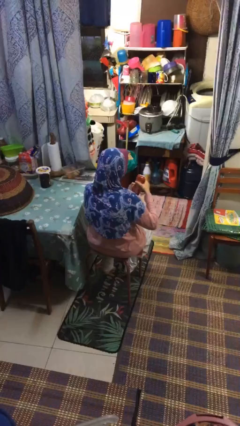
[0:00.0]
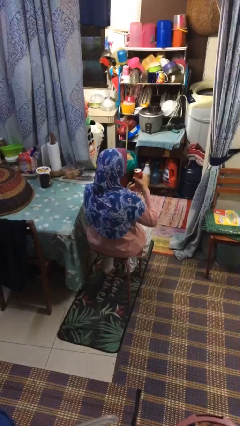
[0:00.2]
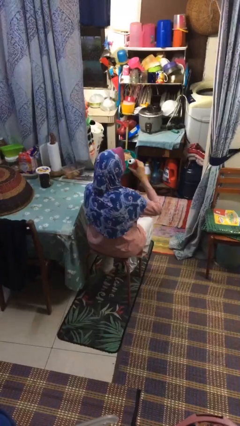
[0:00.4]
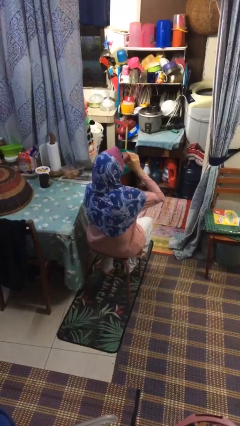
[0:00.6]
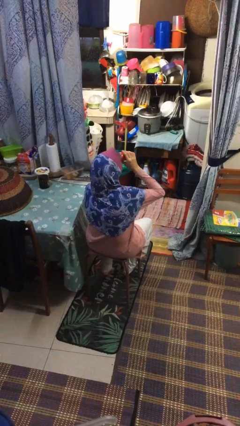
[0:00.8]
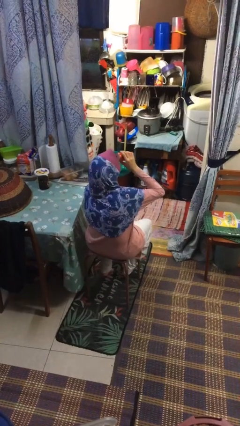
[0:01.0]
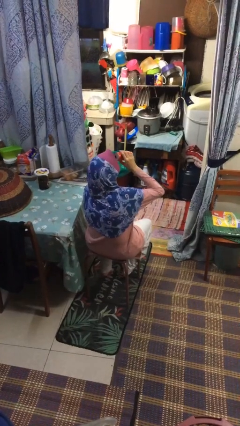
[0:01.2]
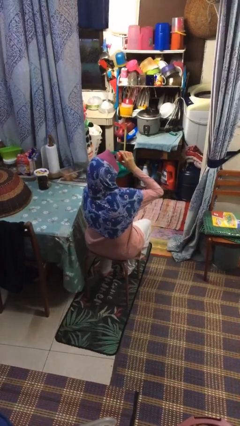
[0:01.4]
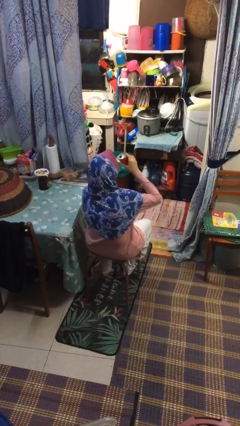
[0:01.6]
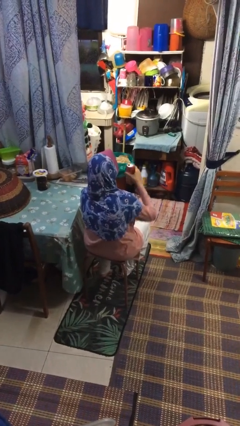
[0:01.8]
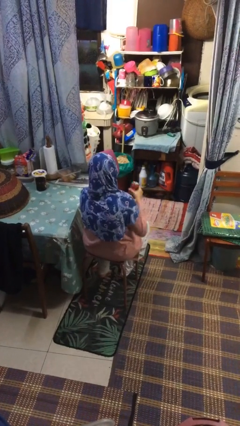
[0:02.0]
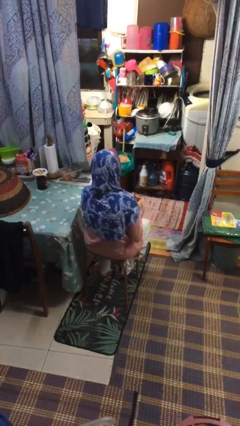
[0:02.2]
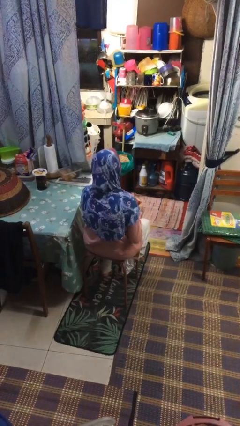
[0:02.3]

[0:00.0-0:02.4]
person drinks from beverage can

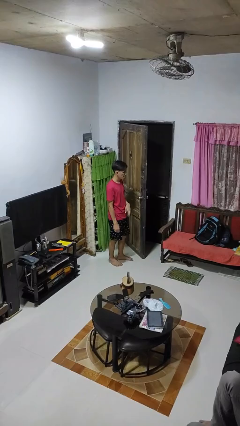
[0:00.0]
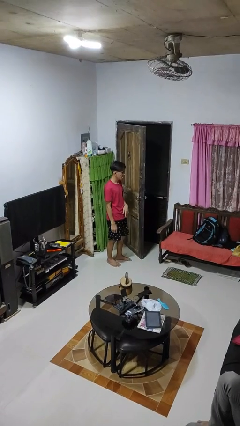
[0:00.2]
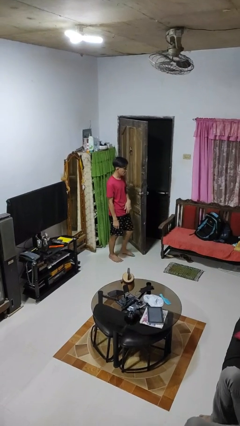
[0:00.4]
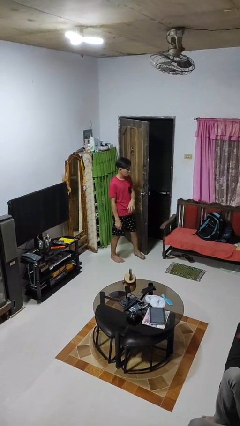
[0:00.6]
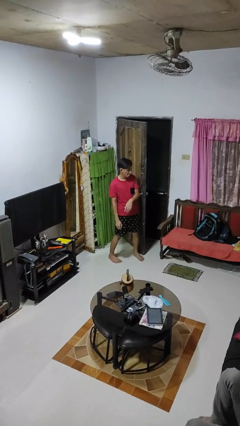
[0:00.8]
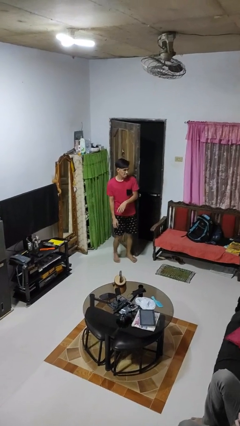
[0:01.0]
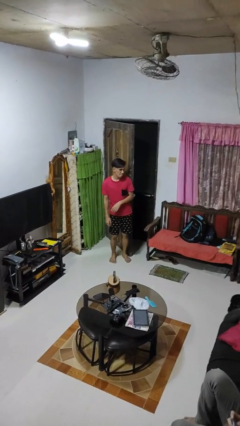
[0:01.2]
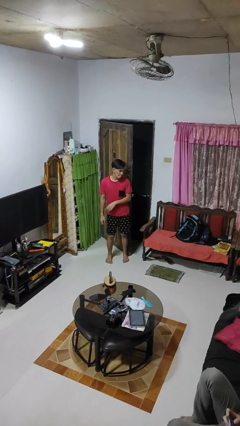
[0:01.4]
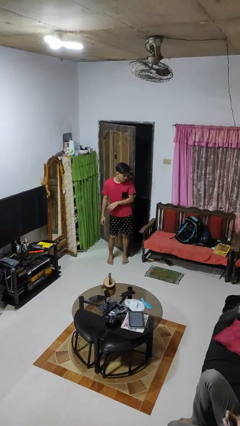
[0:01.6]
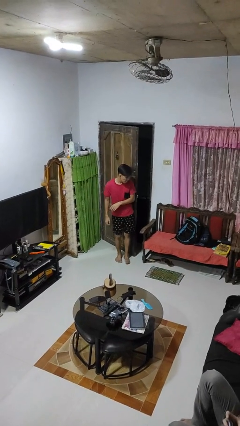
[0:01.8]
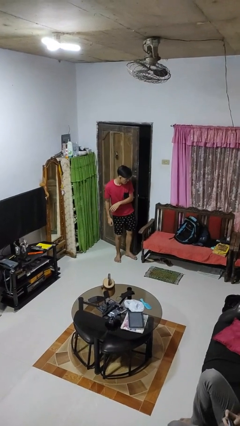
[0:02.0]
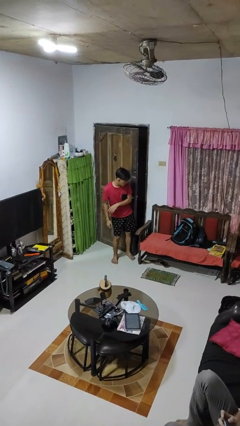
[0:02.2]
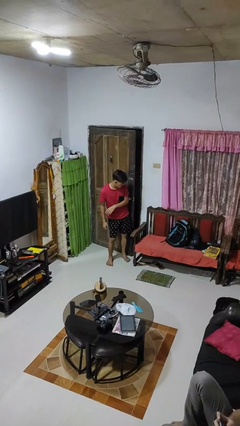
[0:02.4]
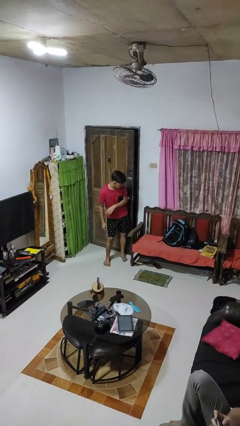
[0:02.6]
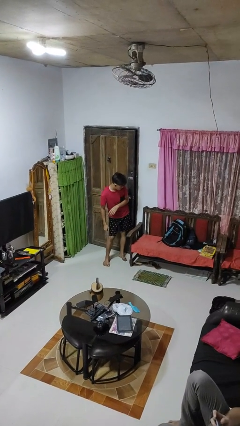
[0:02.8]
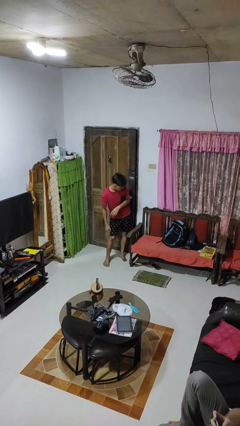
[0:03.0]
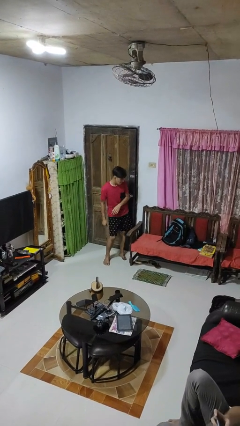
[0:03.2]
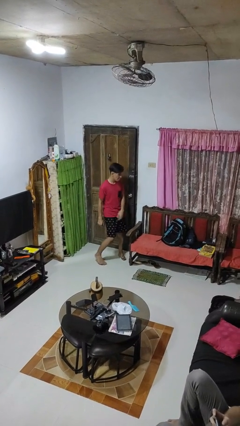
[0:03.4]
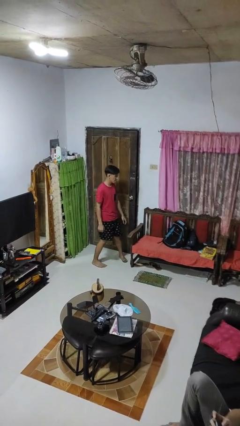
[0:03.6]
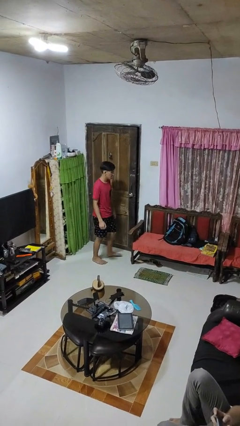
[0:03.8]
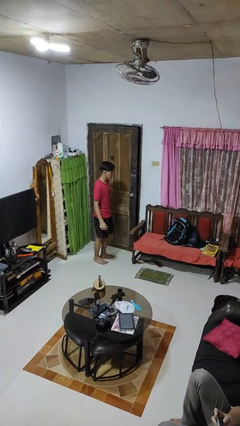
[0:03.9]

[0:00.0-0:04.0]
person closes door with hip

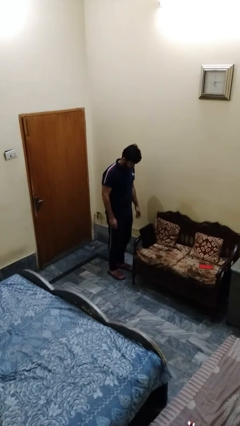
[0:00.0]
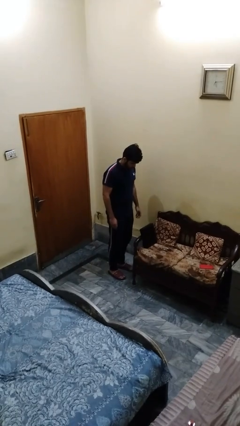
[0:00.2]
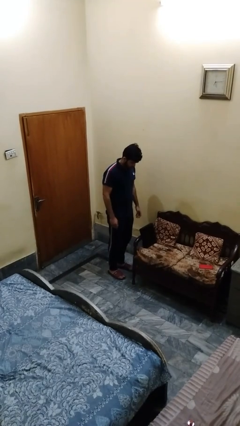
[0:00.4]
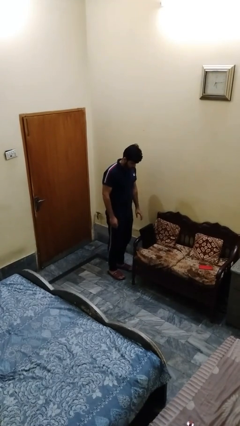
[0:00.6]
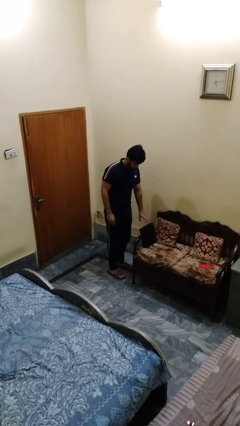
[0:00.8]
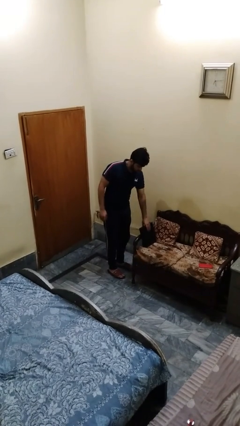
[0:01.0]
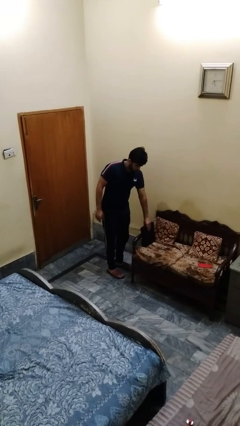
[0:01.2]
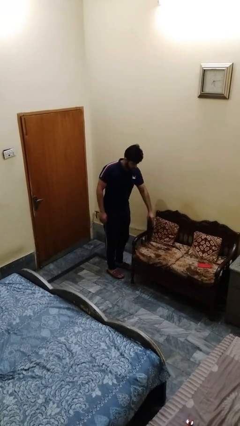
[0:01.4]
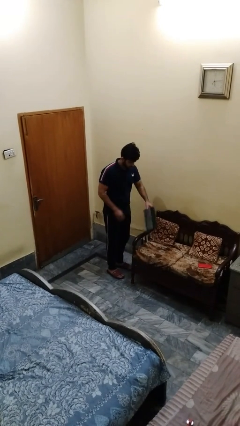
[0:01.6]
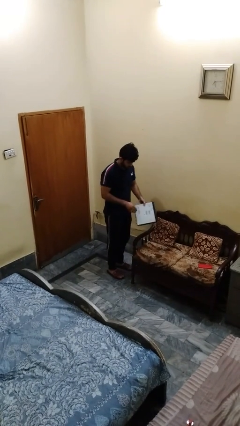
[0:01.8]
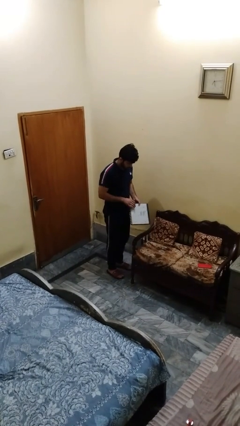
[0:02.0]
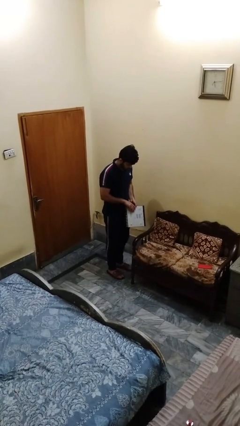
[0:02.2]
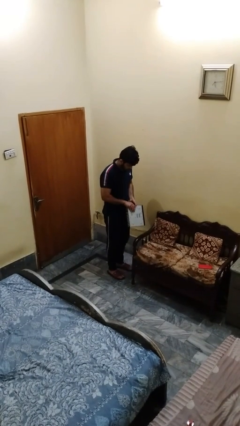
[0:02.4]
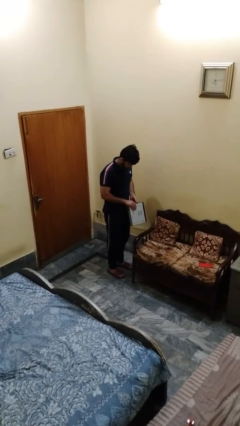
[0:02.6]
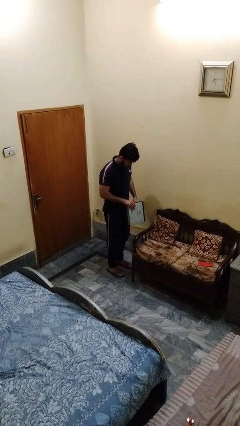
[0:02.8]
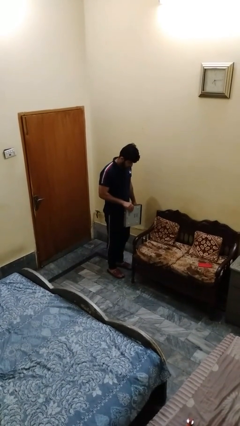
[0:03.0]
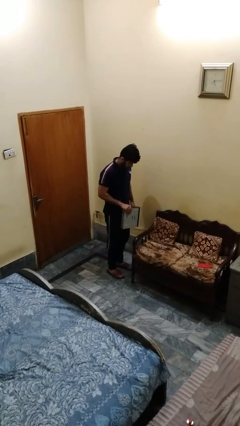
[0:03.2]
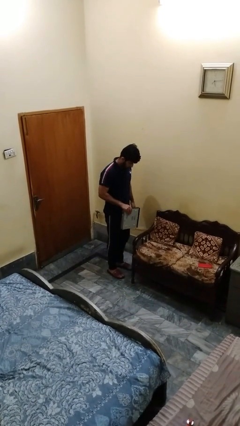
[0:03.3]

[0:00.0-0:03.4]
person picks up object from couch

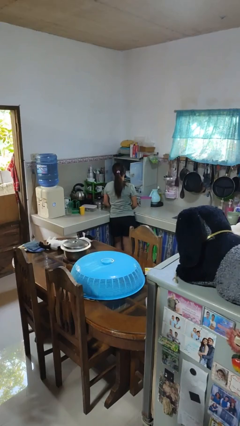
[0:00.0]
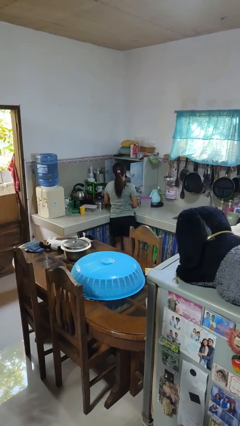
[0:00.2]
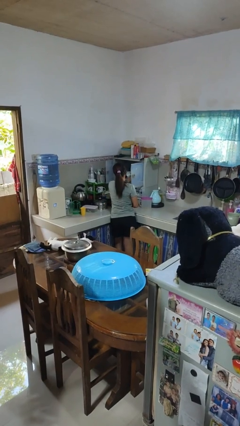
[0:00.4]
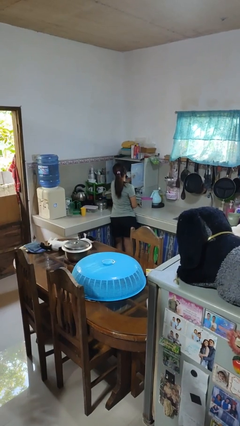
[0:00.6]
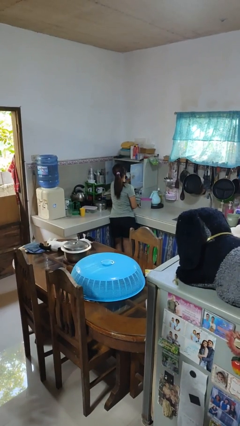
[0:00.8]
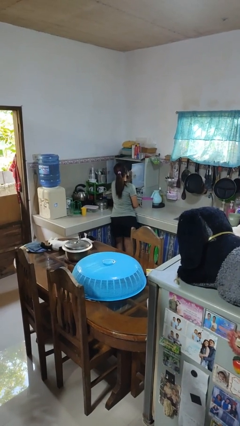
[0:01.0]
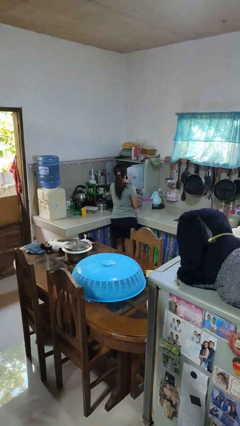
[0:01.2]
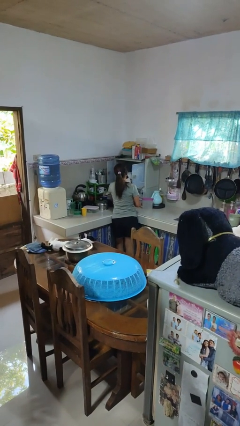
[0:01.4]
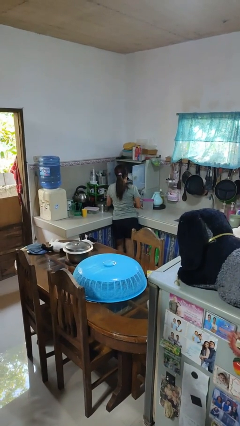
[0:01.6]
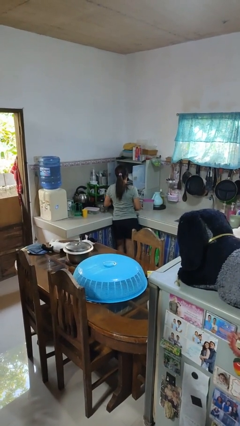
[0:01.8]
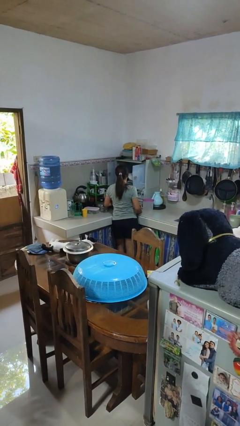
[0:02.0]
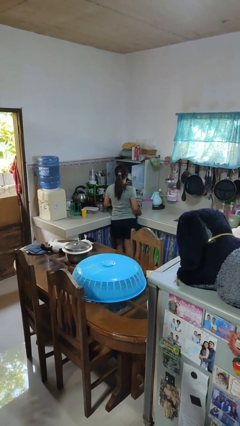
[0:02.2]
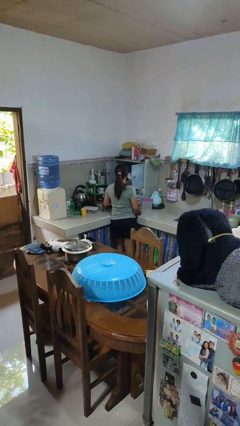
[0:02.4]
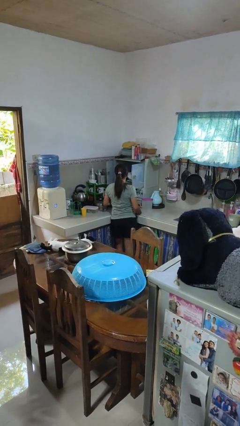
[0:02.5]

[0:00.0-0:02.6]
person takes object from kitchen drawer

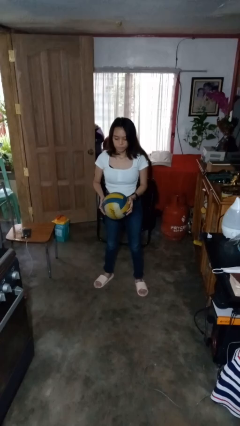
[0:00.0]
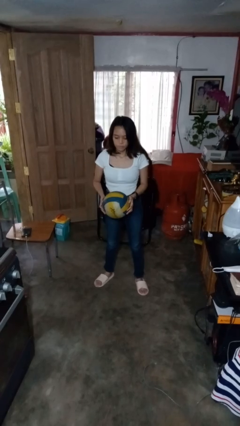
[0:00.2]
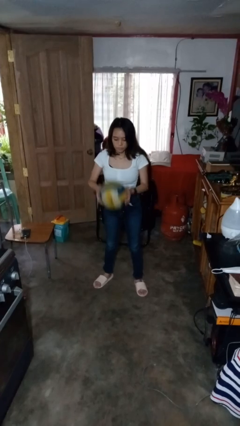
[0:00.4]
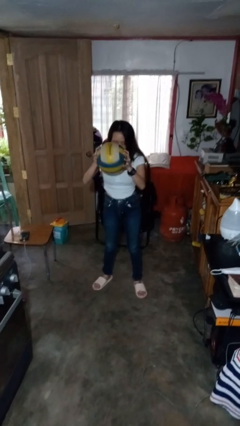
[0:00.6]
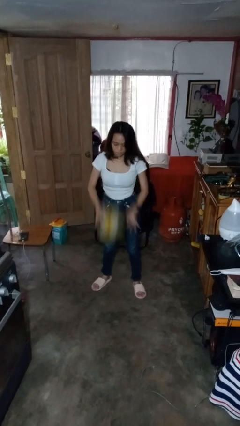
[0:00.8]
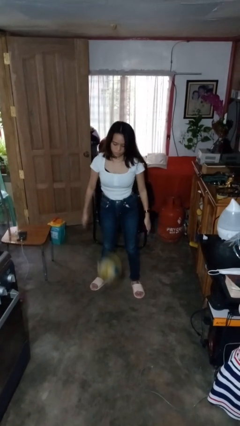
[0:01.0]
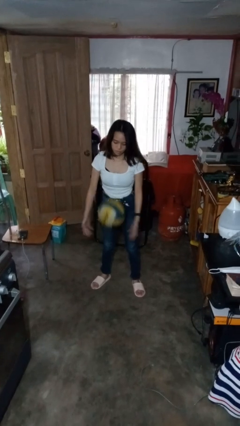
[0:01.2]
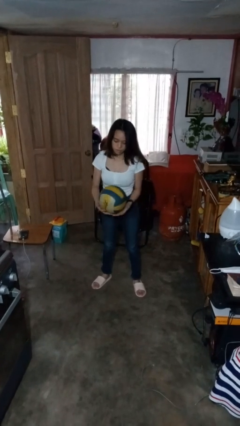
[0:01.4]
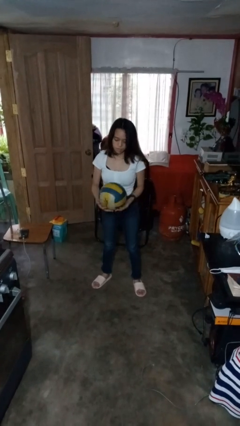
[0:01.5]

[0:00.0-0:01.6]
person bounces ball on floor

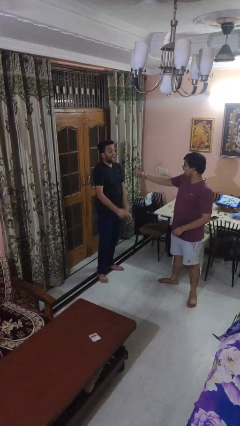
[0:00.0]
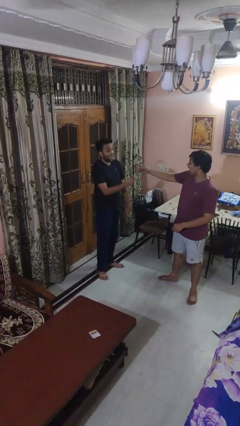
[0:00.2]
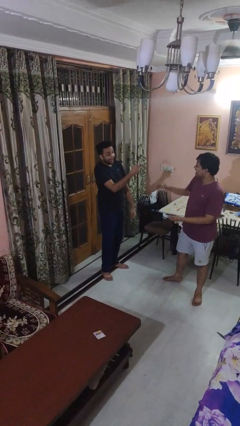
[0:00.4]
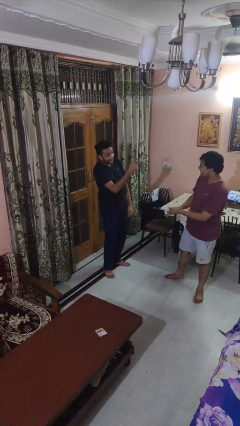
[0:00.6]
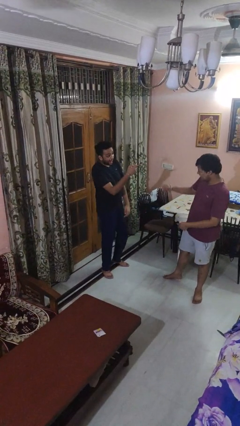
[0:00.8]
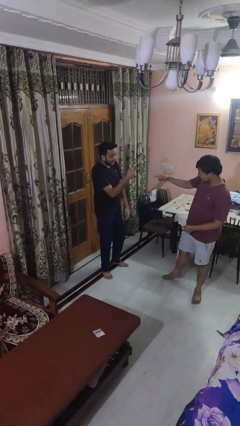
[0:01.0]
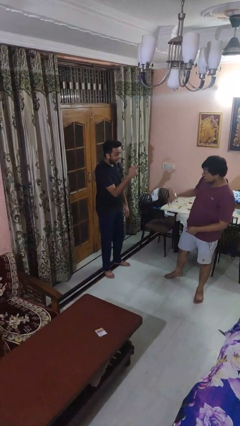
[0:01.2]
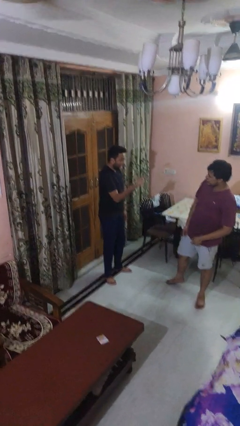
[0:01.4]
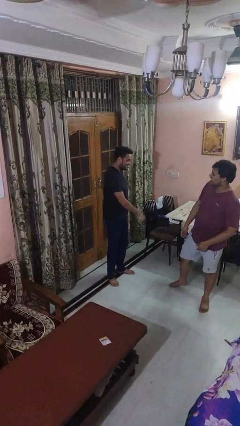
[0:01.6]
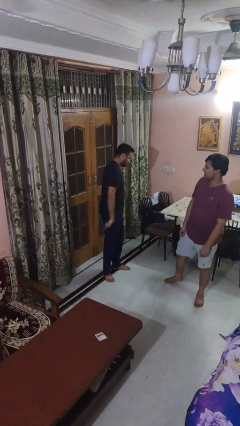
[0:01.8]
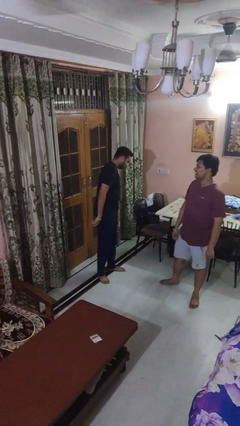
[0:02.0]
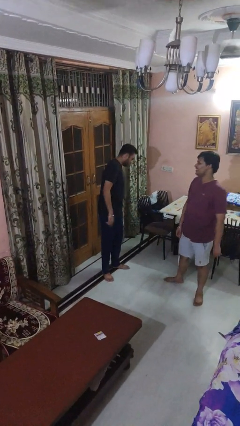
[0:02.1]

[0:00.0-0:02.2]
person laughs with person

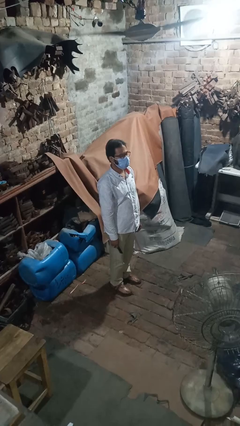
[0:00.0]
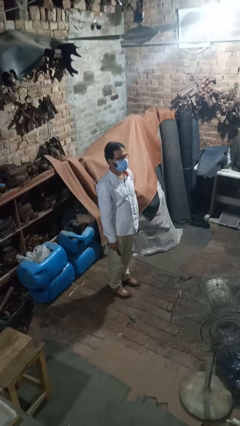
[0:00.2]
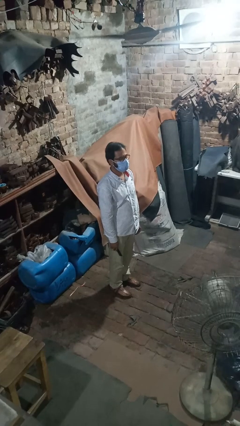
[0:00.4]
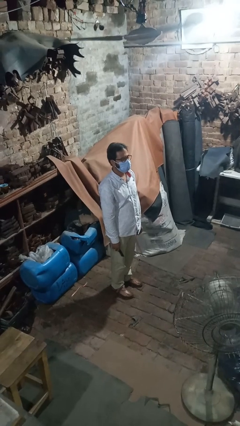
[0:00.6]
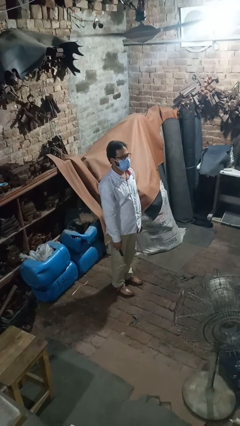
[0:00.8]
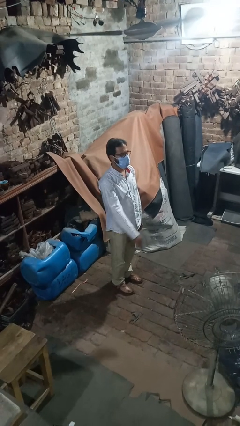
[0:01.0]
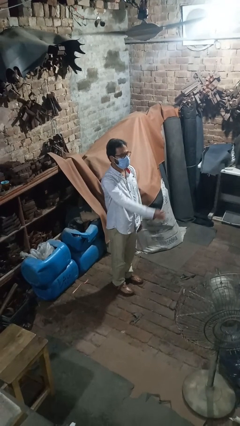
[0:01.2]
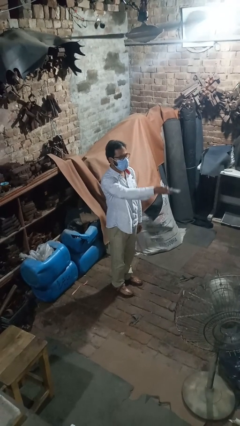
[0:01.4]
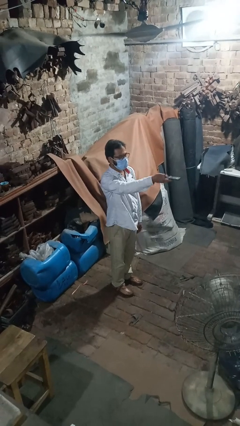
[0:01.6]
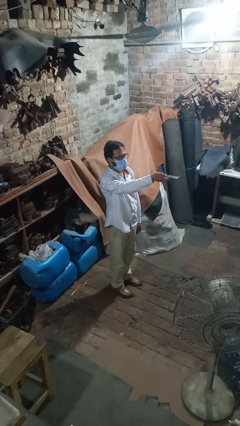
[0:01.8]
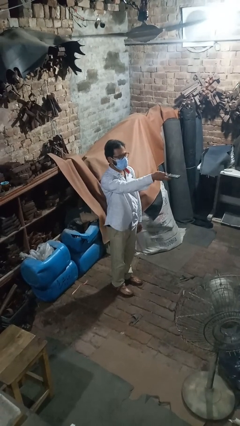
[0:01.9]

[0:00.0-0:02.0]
person uses television remote
